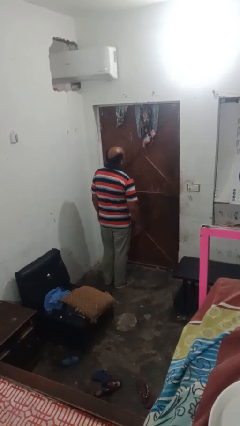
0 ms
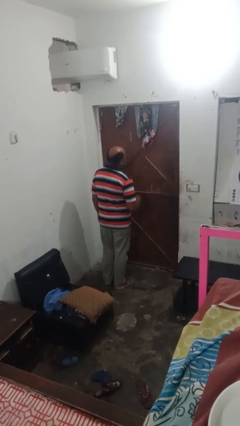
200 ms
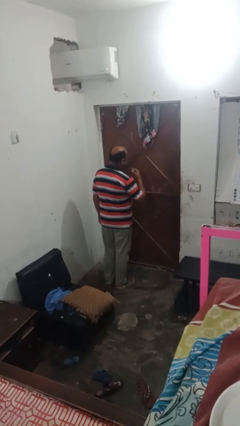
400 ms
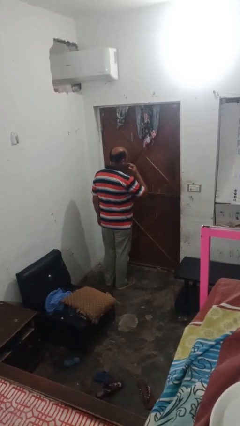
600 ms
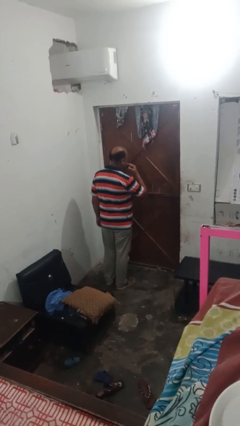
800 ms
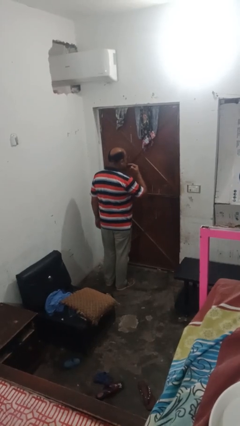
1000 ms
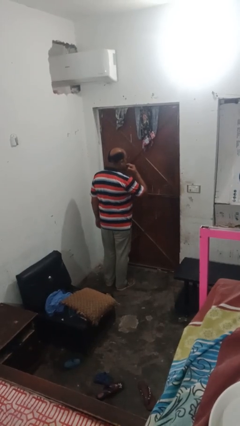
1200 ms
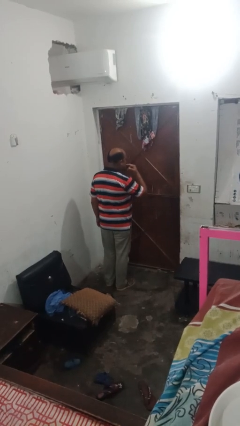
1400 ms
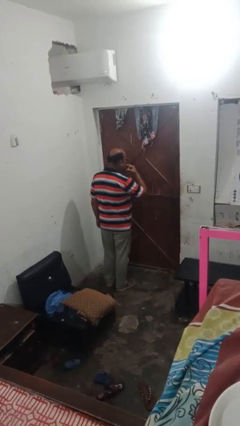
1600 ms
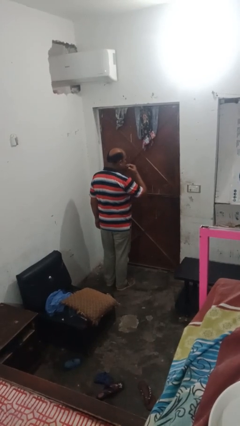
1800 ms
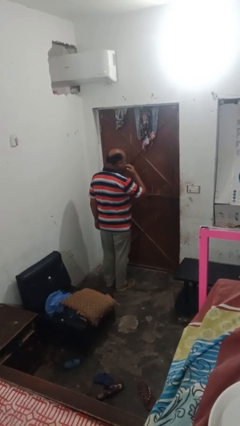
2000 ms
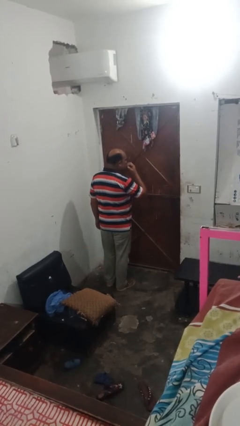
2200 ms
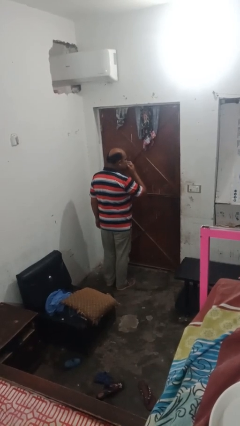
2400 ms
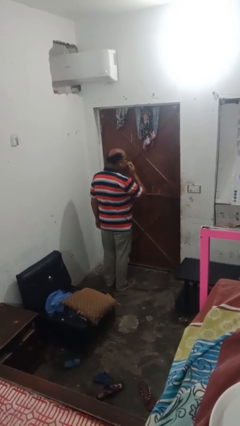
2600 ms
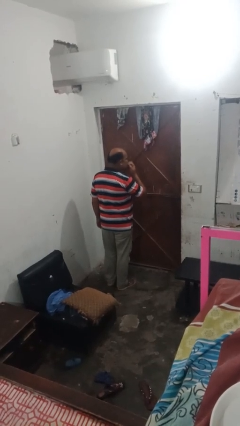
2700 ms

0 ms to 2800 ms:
person licks fingers

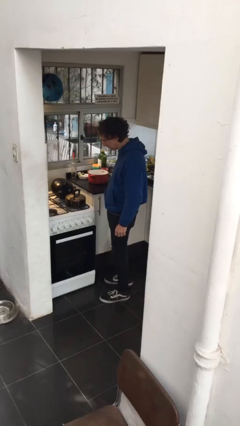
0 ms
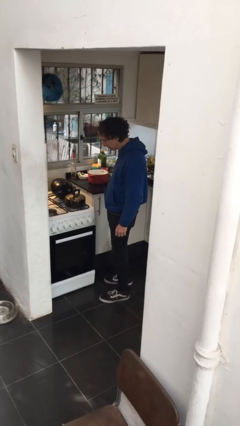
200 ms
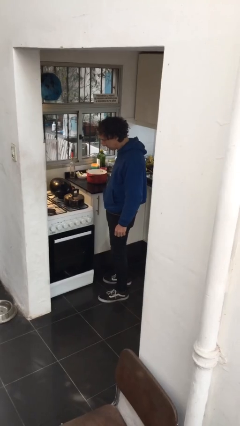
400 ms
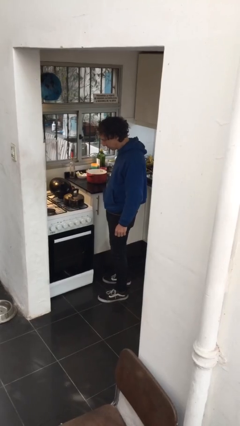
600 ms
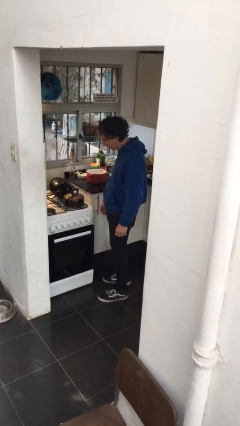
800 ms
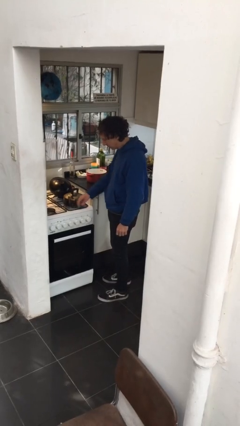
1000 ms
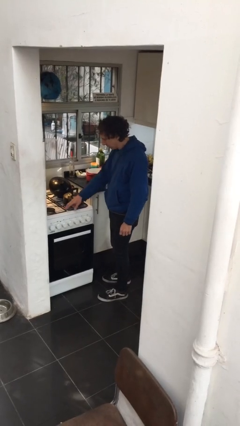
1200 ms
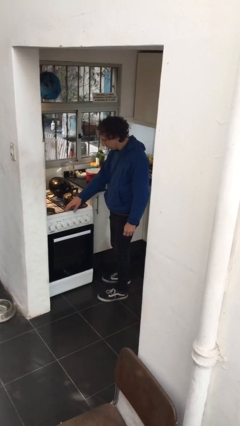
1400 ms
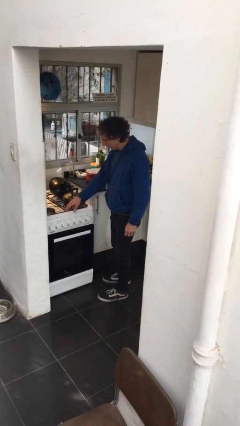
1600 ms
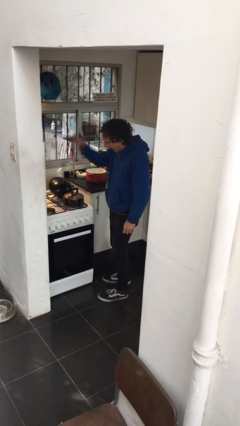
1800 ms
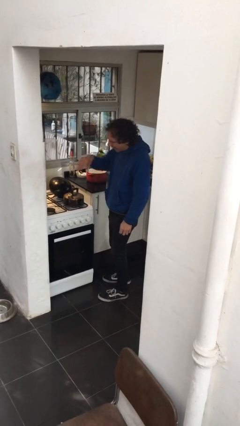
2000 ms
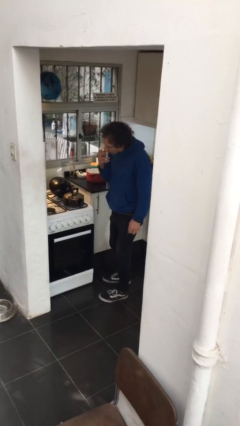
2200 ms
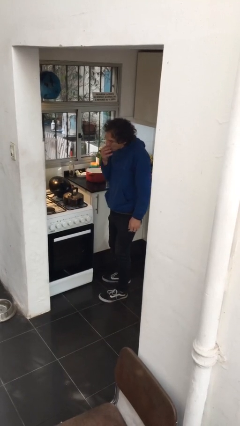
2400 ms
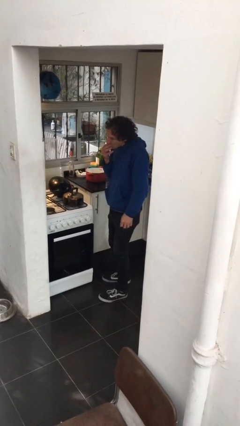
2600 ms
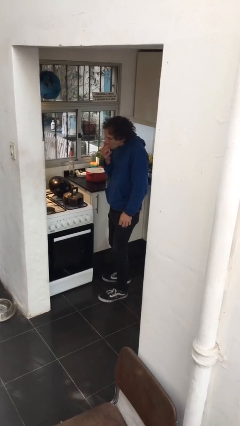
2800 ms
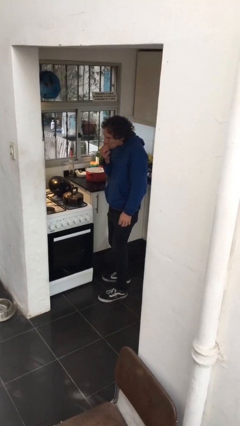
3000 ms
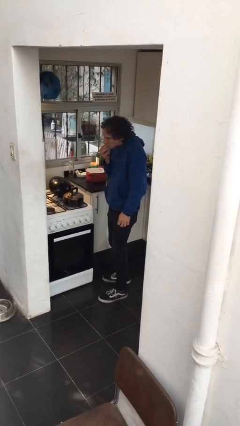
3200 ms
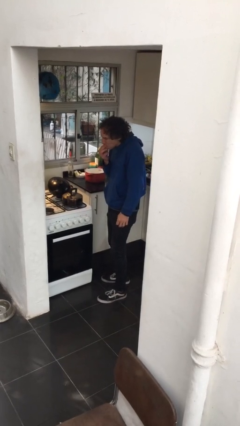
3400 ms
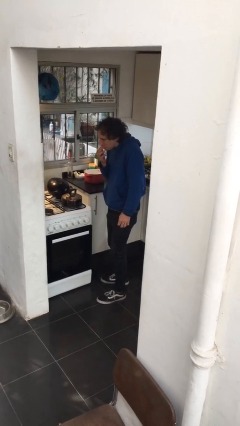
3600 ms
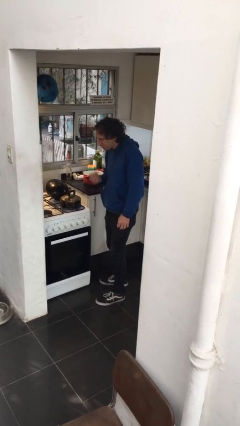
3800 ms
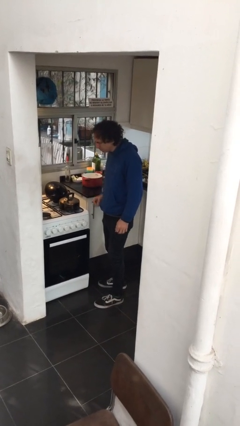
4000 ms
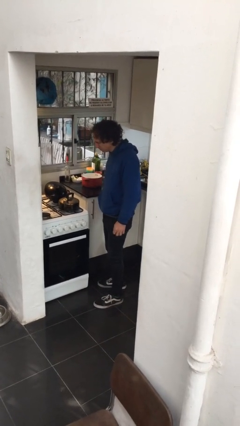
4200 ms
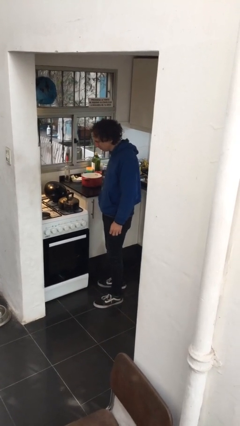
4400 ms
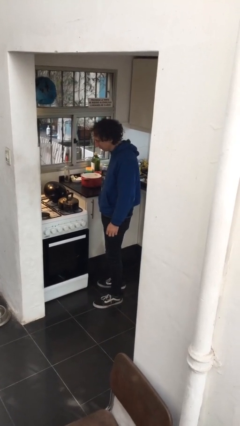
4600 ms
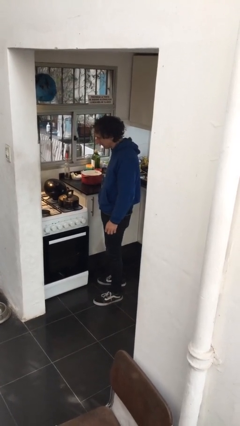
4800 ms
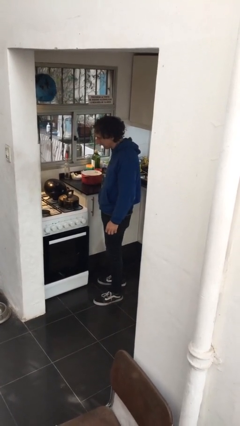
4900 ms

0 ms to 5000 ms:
person burns hand

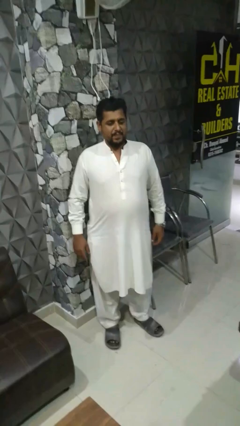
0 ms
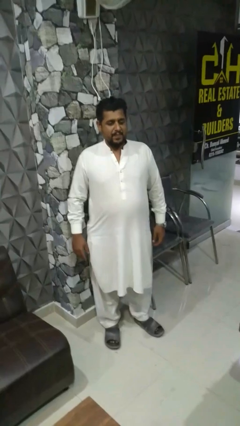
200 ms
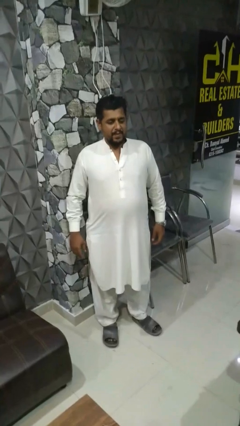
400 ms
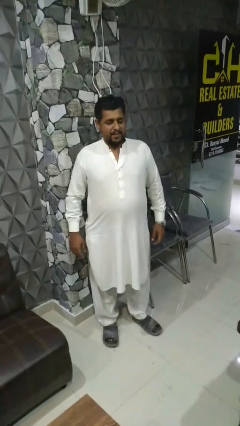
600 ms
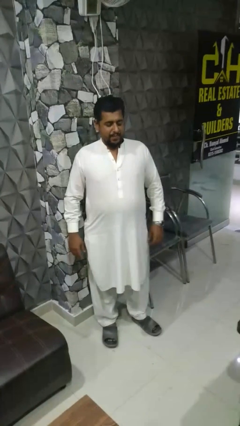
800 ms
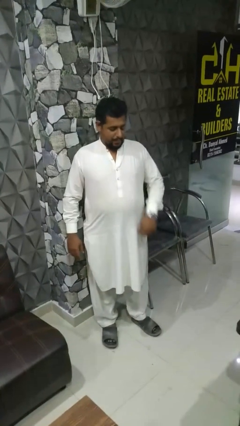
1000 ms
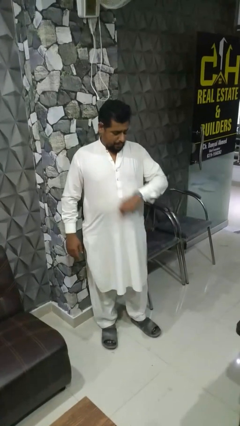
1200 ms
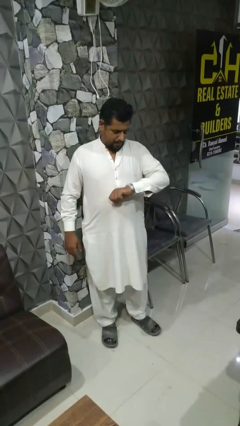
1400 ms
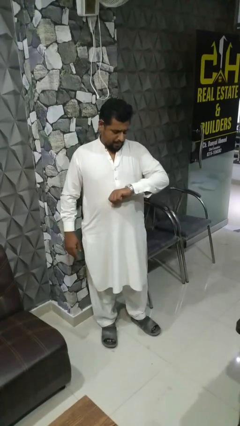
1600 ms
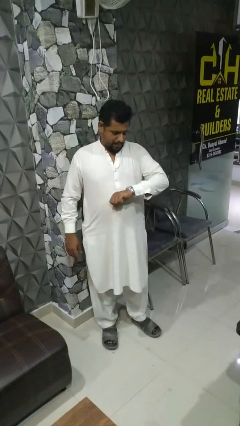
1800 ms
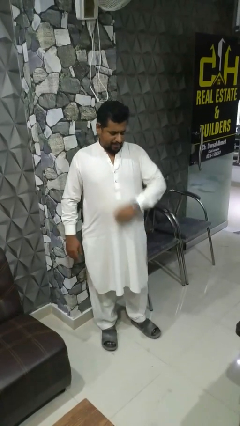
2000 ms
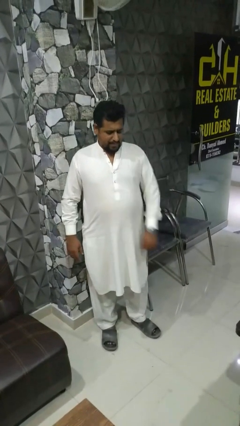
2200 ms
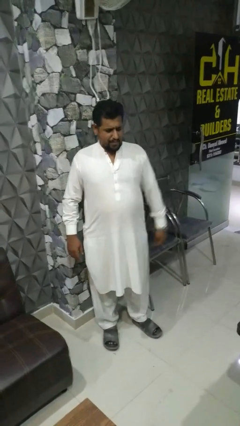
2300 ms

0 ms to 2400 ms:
person looks at wristwatch

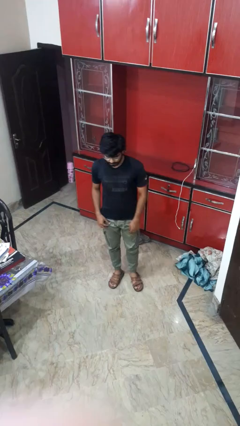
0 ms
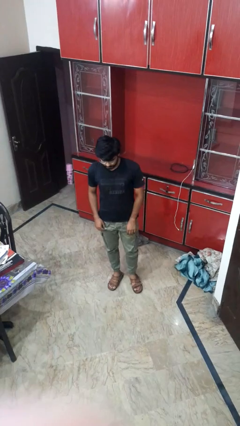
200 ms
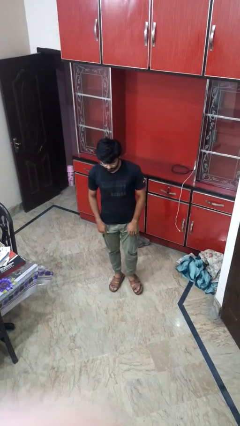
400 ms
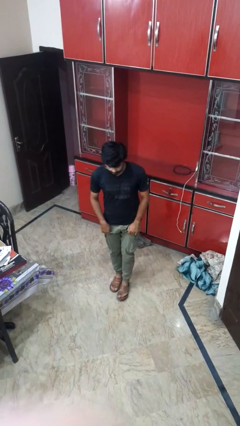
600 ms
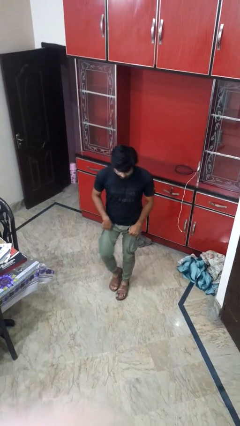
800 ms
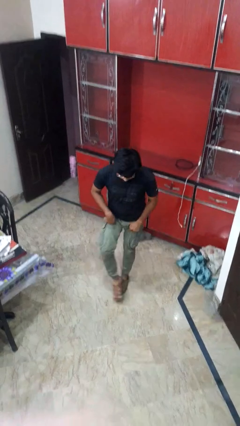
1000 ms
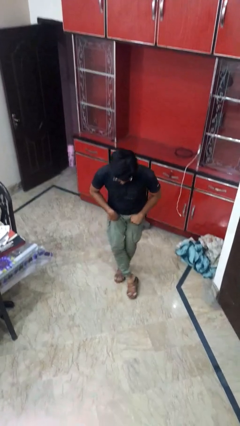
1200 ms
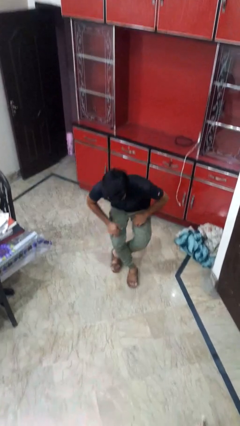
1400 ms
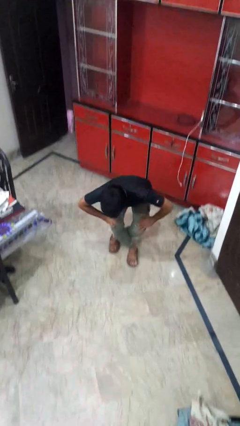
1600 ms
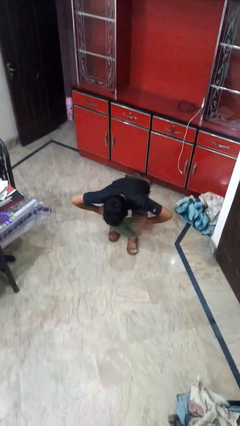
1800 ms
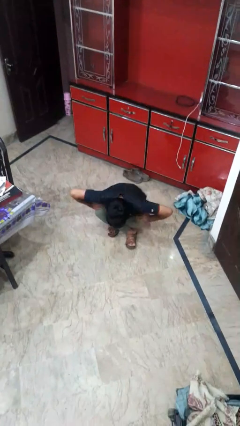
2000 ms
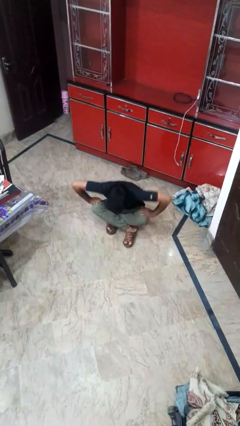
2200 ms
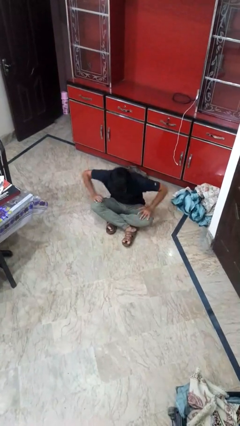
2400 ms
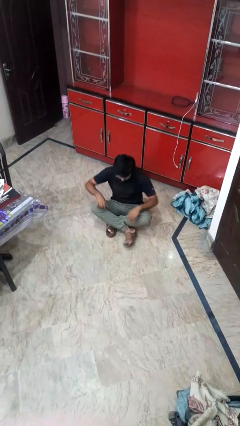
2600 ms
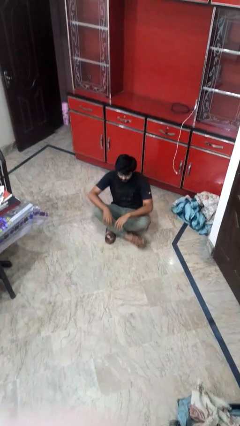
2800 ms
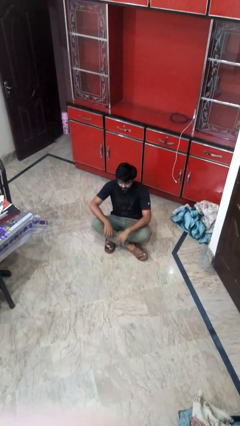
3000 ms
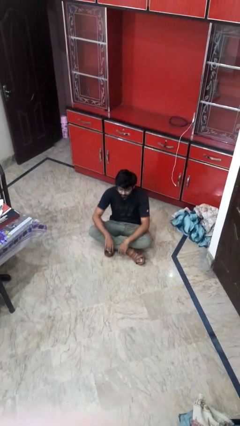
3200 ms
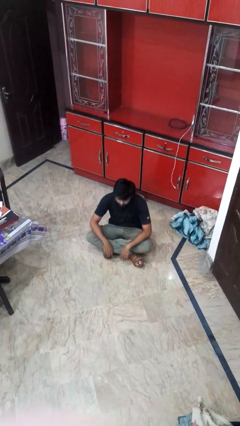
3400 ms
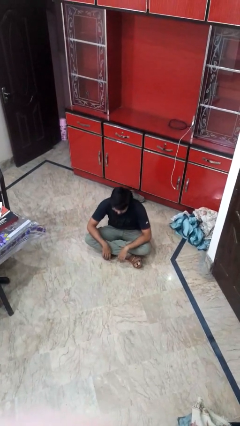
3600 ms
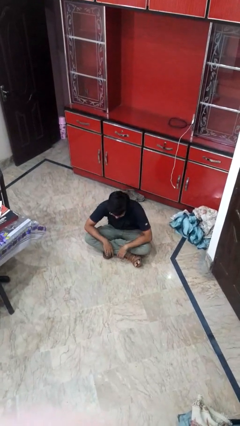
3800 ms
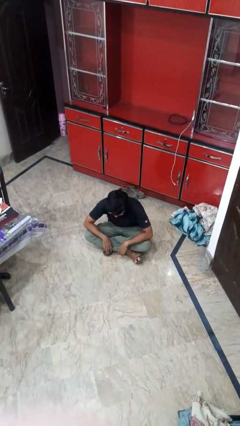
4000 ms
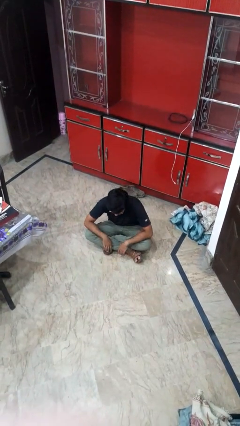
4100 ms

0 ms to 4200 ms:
person sits crisscross

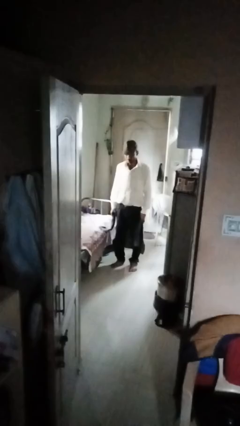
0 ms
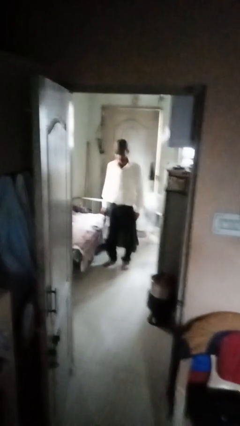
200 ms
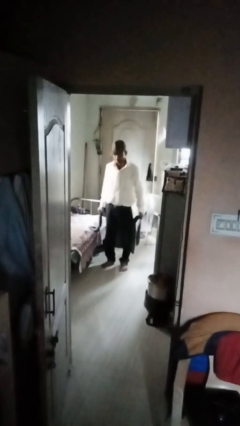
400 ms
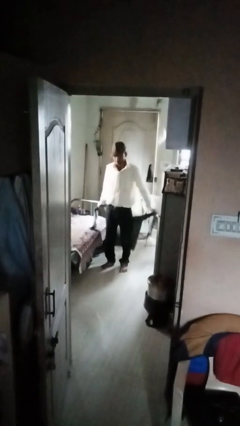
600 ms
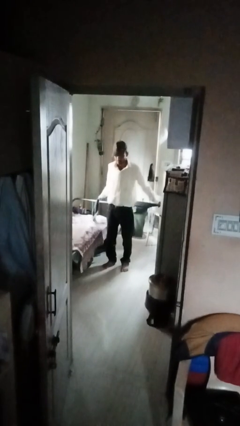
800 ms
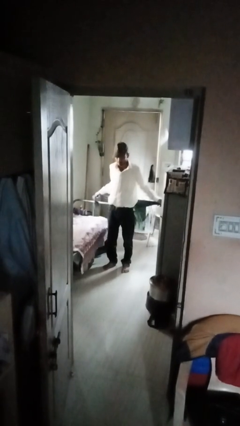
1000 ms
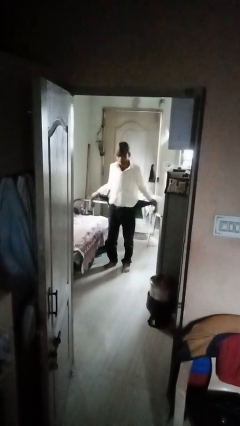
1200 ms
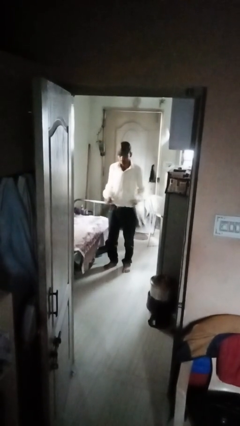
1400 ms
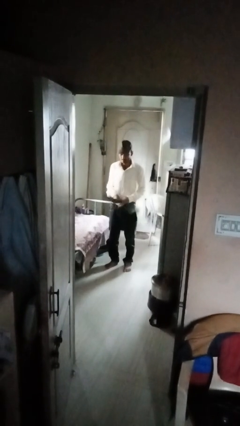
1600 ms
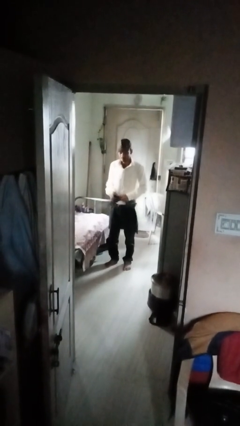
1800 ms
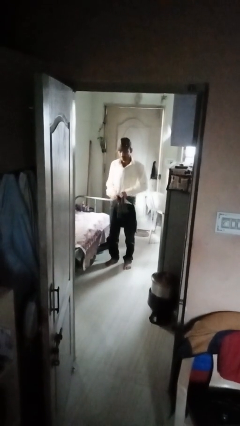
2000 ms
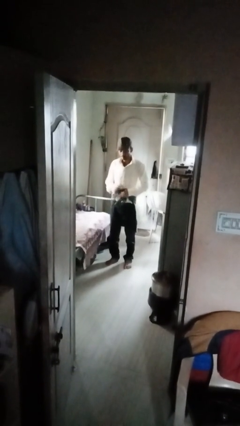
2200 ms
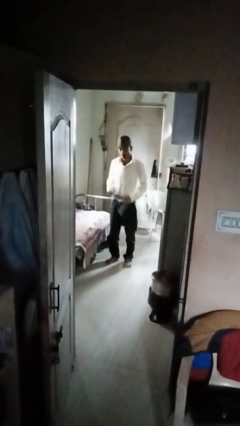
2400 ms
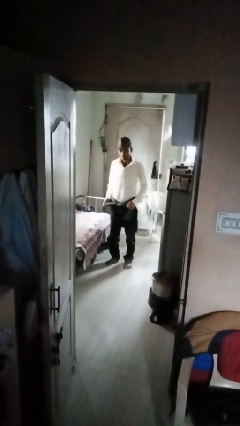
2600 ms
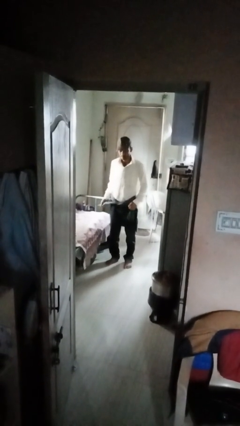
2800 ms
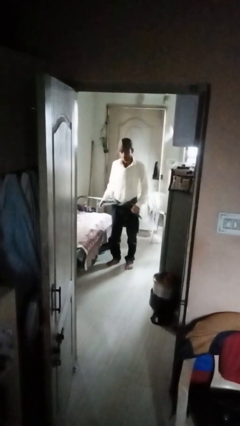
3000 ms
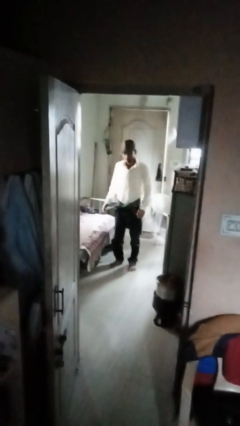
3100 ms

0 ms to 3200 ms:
person ties jacket around waist
